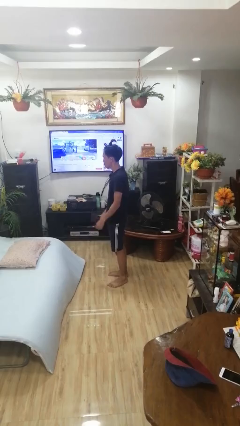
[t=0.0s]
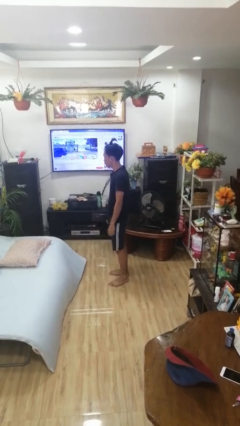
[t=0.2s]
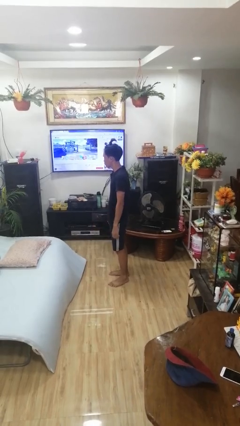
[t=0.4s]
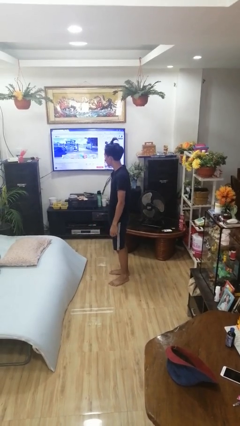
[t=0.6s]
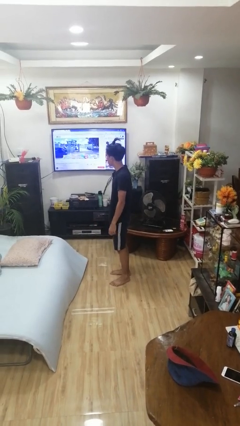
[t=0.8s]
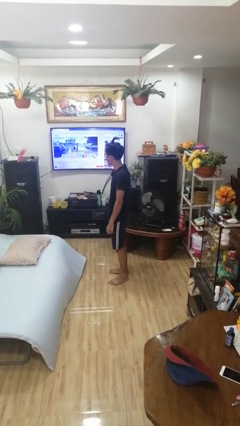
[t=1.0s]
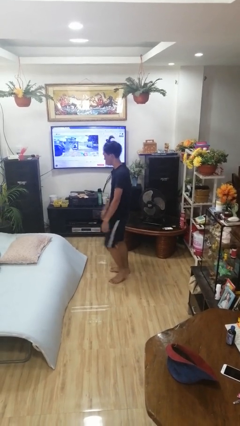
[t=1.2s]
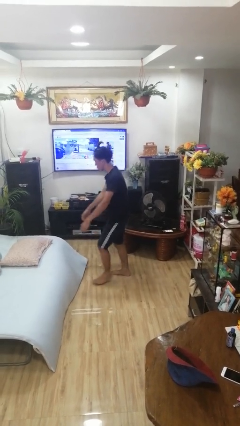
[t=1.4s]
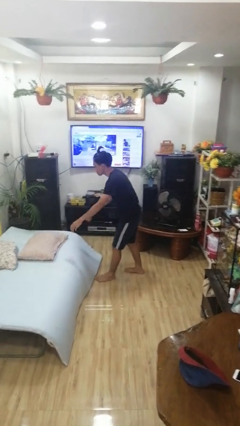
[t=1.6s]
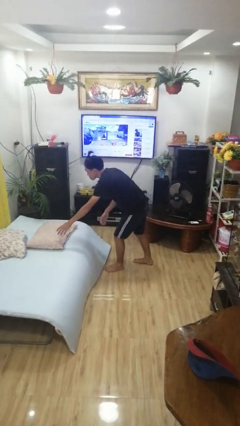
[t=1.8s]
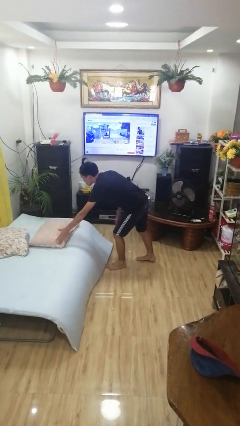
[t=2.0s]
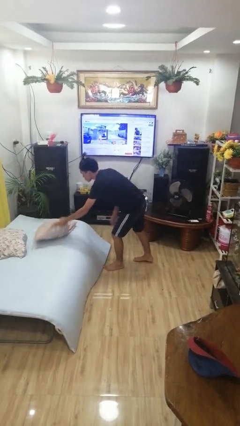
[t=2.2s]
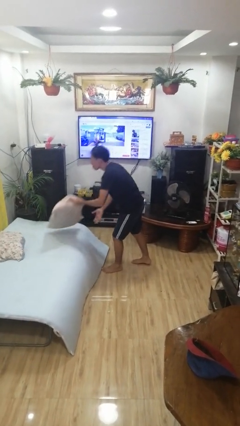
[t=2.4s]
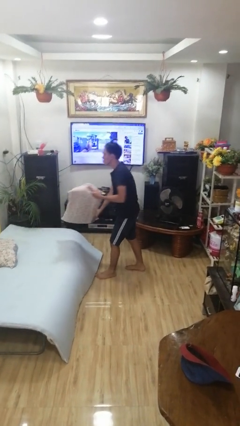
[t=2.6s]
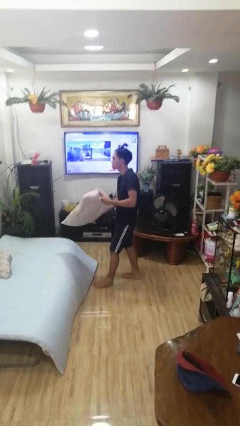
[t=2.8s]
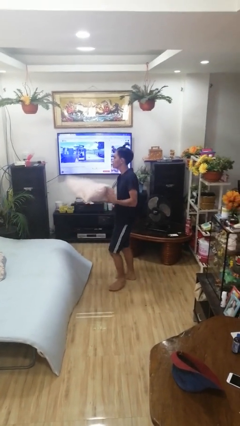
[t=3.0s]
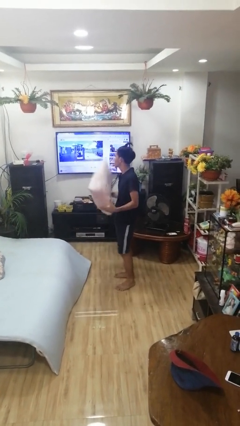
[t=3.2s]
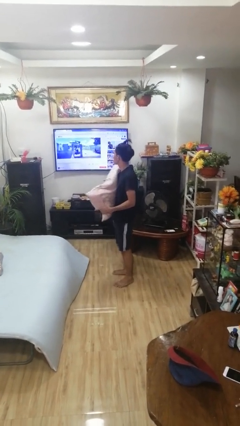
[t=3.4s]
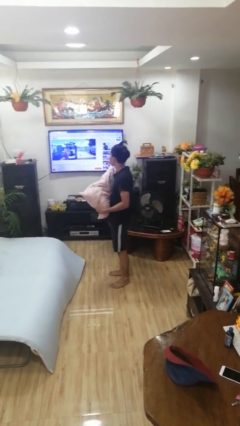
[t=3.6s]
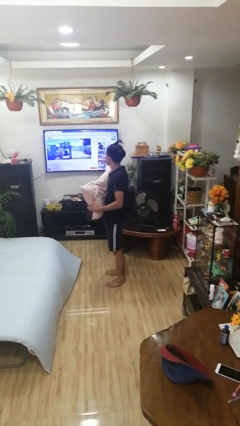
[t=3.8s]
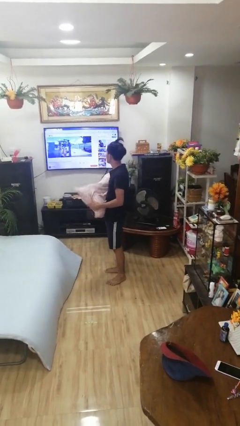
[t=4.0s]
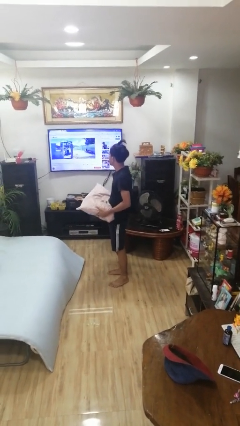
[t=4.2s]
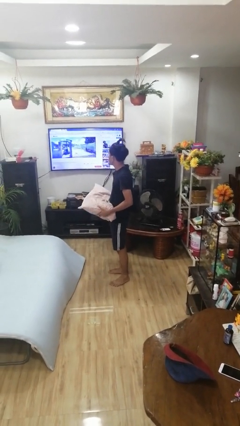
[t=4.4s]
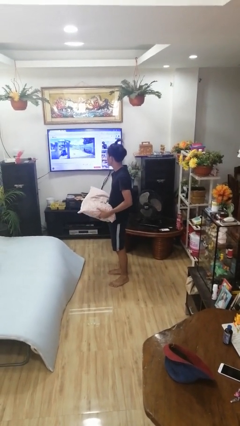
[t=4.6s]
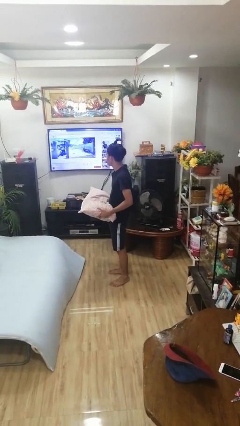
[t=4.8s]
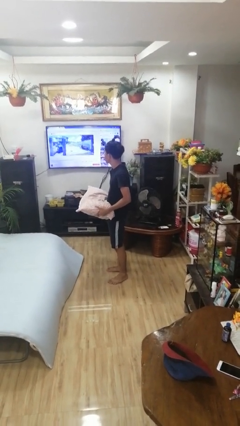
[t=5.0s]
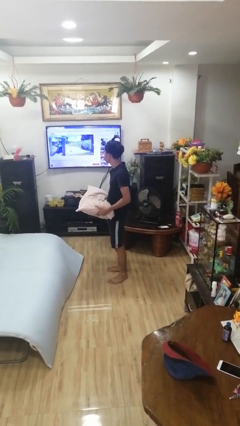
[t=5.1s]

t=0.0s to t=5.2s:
person picks up object from bed

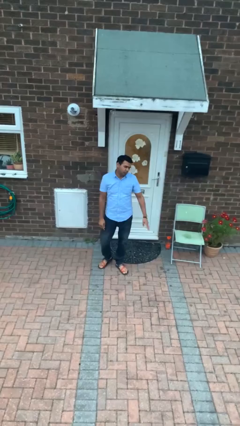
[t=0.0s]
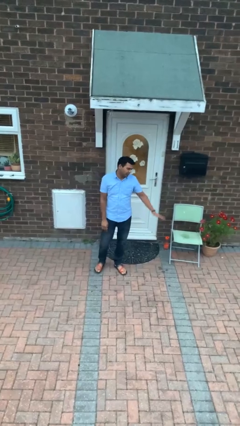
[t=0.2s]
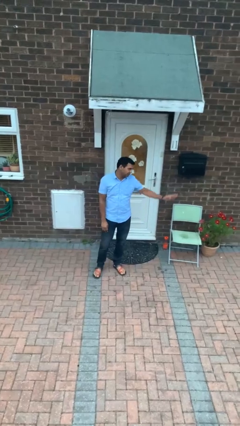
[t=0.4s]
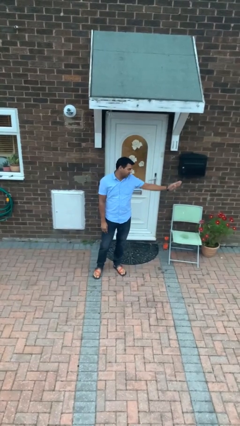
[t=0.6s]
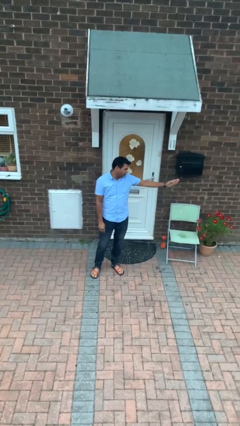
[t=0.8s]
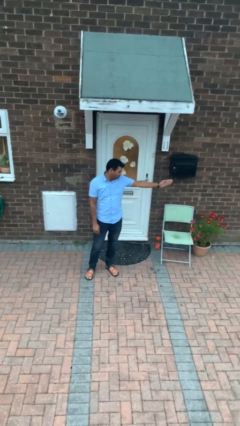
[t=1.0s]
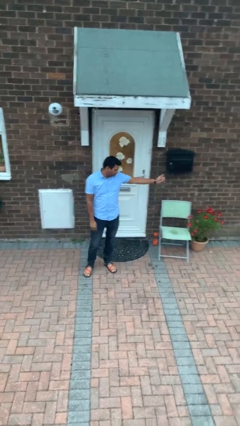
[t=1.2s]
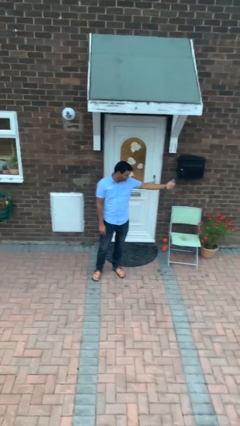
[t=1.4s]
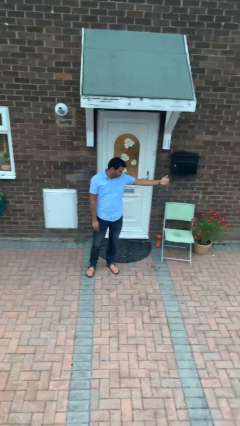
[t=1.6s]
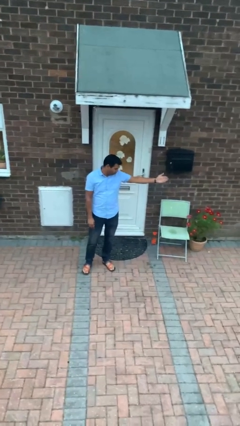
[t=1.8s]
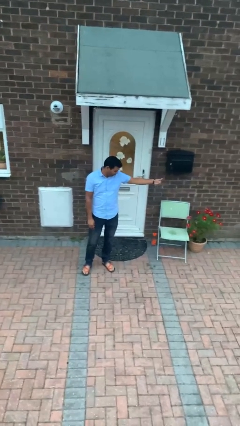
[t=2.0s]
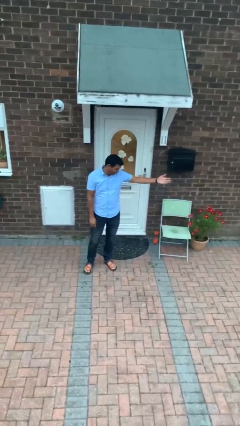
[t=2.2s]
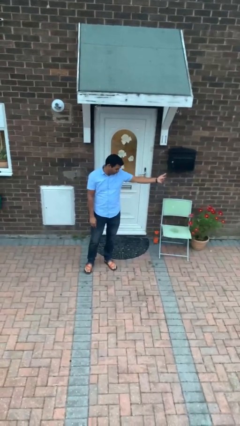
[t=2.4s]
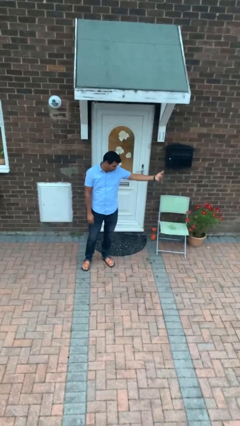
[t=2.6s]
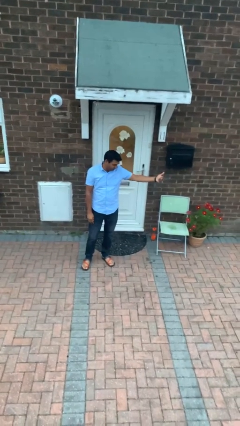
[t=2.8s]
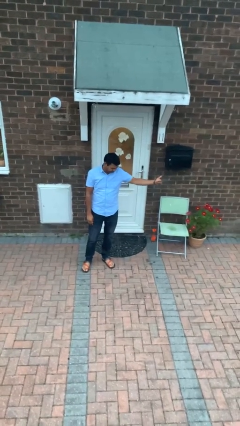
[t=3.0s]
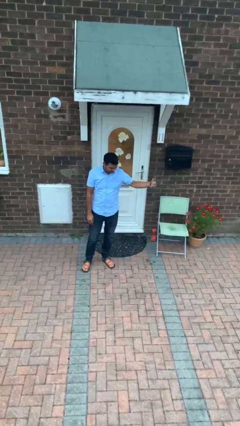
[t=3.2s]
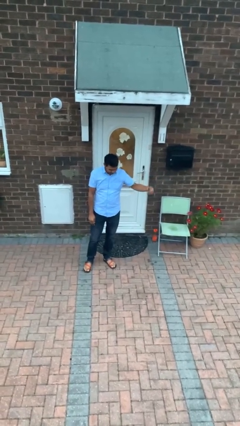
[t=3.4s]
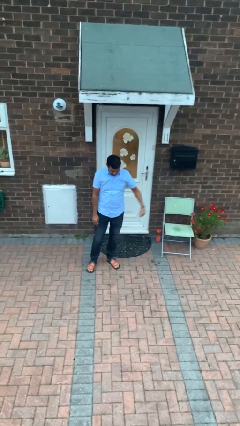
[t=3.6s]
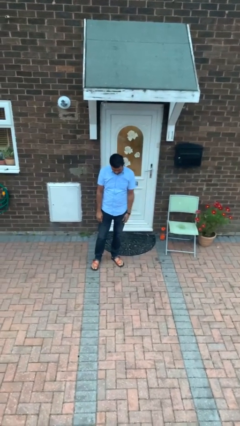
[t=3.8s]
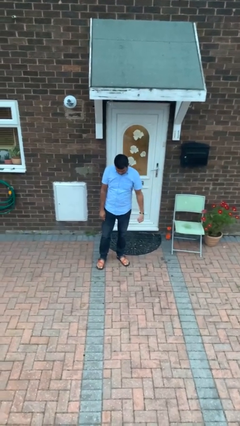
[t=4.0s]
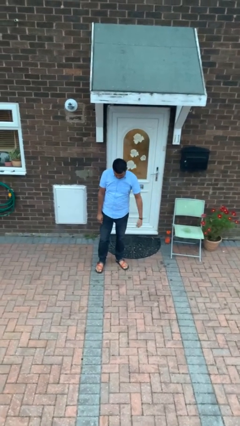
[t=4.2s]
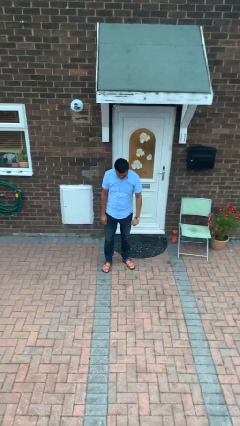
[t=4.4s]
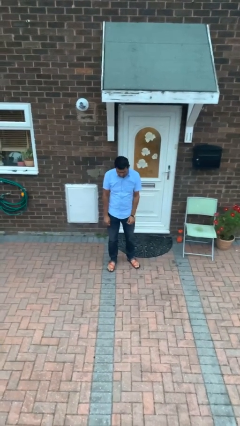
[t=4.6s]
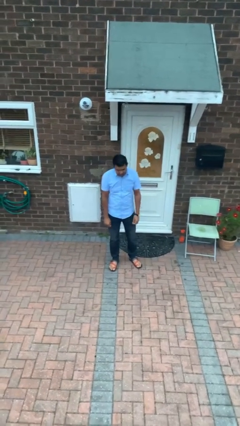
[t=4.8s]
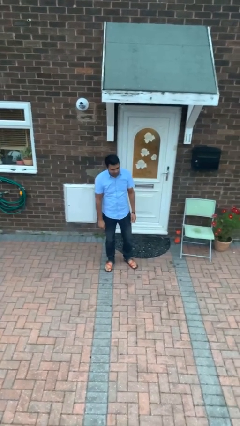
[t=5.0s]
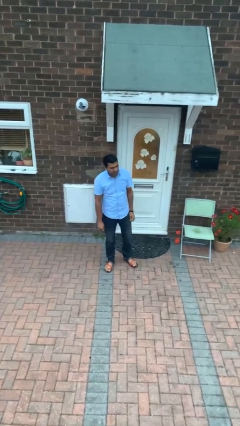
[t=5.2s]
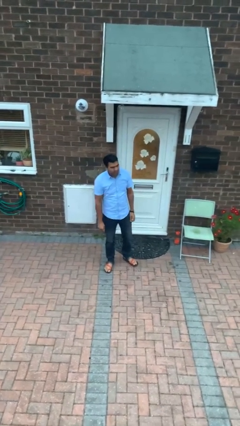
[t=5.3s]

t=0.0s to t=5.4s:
person gestures come here

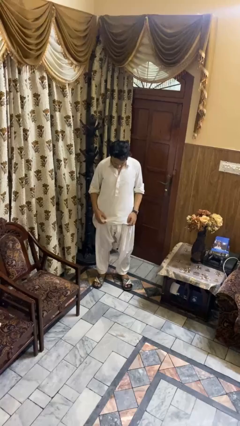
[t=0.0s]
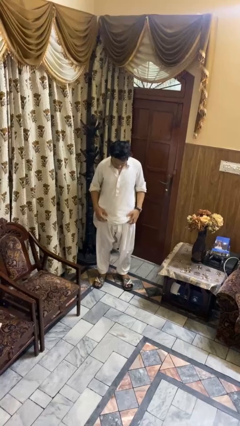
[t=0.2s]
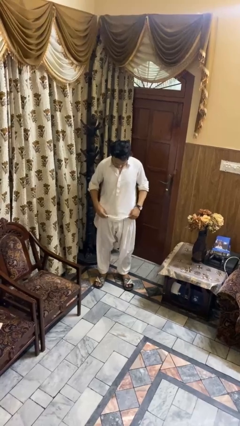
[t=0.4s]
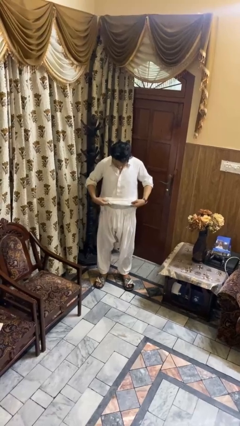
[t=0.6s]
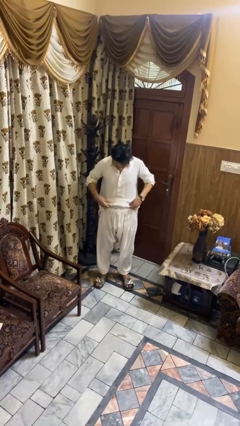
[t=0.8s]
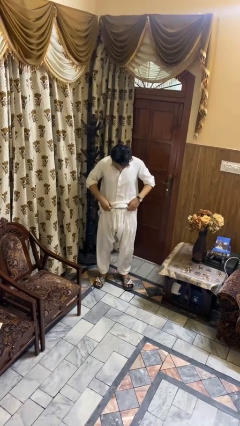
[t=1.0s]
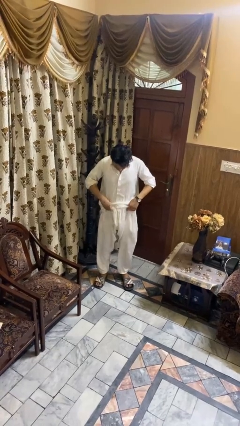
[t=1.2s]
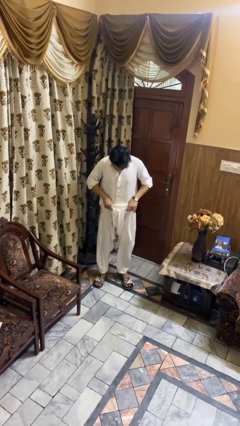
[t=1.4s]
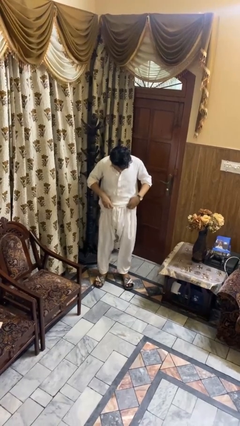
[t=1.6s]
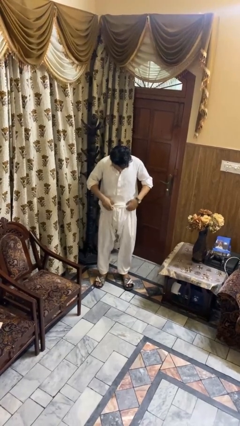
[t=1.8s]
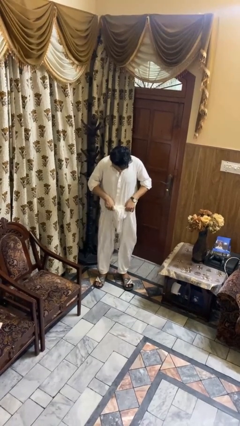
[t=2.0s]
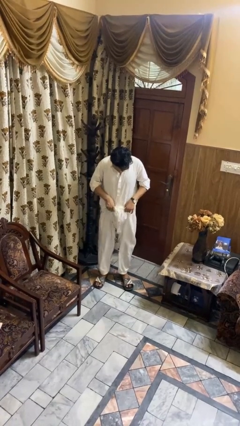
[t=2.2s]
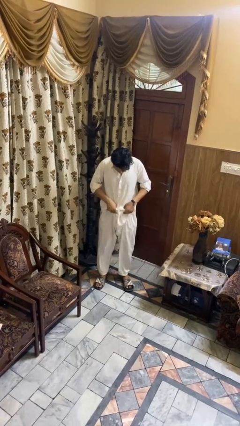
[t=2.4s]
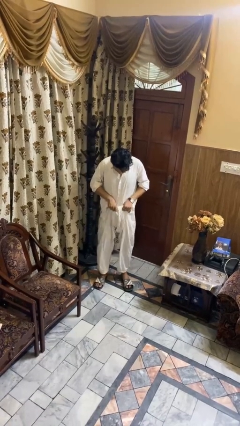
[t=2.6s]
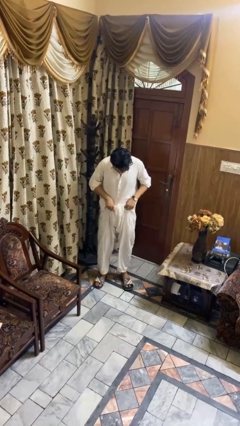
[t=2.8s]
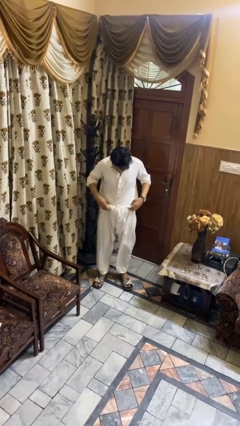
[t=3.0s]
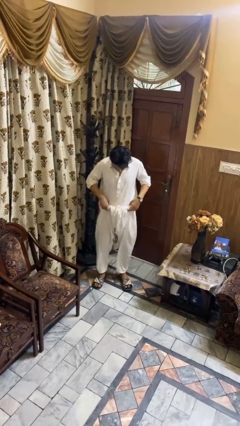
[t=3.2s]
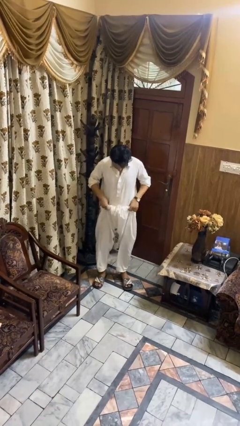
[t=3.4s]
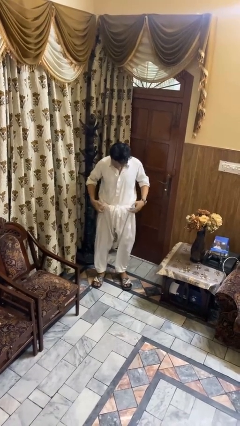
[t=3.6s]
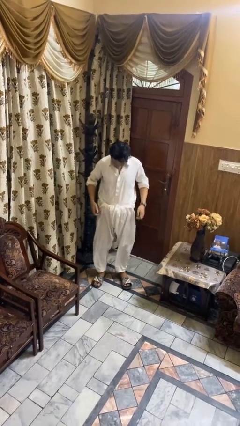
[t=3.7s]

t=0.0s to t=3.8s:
person tucks in shirt

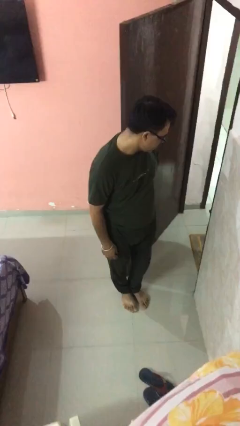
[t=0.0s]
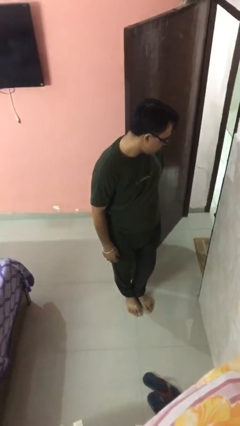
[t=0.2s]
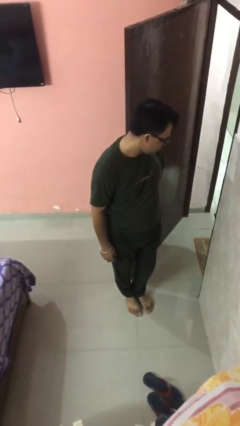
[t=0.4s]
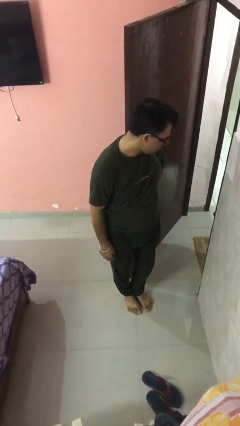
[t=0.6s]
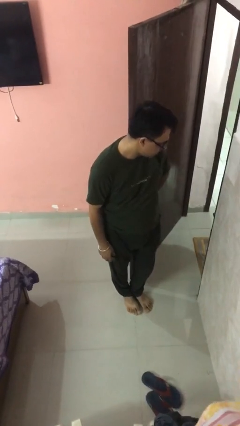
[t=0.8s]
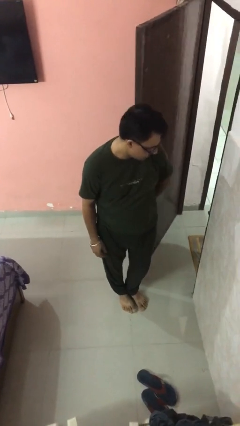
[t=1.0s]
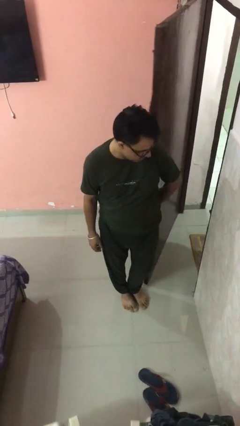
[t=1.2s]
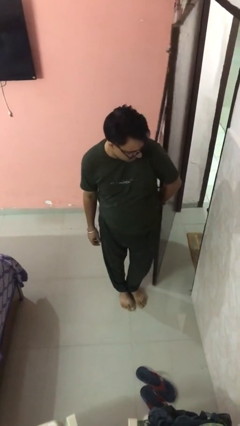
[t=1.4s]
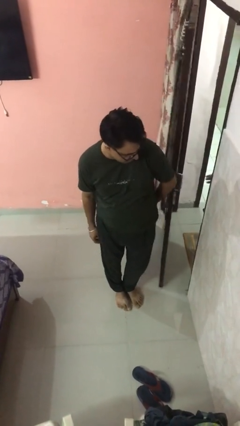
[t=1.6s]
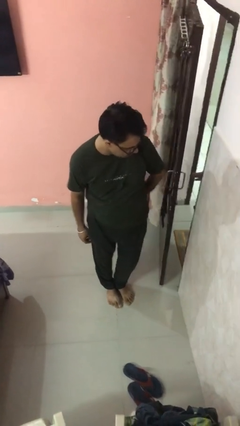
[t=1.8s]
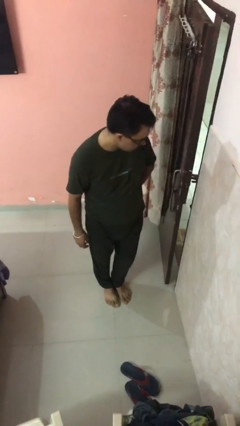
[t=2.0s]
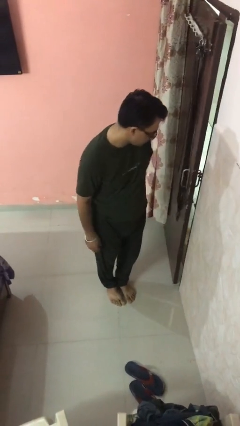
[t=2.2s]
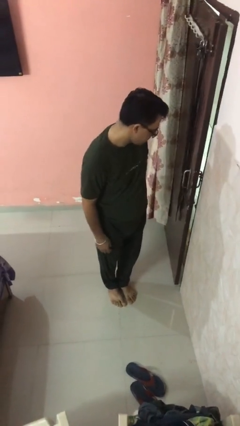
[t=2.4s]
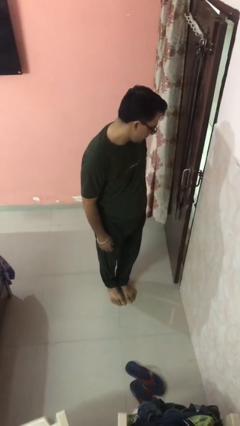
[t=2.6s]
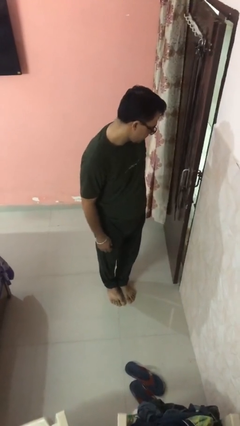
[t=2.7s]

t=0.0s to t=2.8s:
person closes door with hip

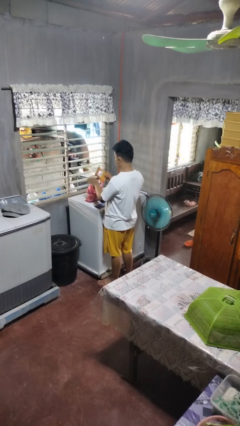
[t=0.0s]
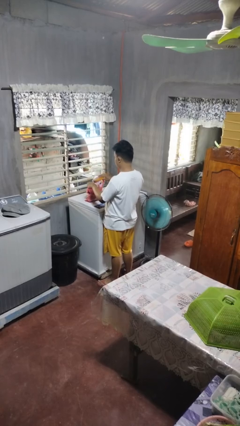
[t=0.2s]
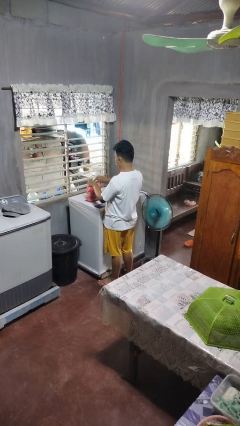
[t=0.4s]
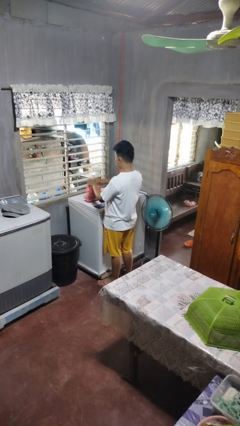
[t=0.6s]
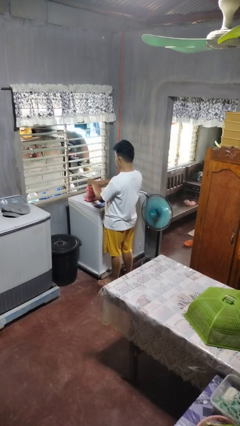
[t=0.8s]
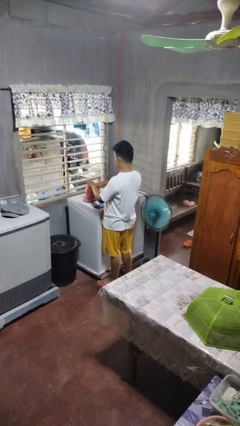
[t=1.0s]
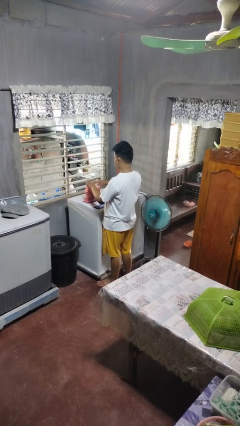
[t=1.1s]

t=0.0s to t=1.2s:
person puts object into bag
